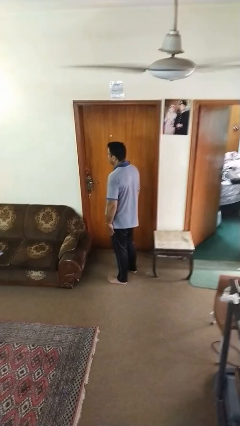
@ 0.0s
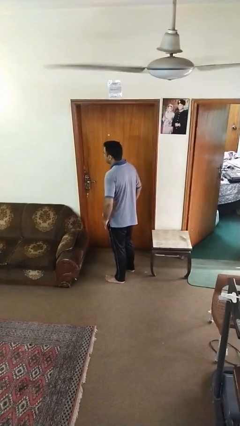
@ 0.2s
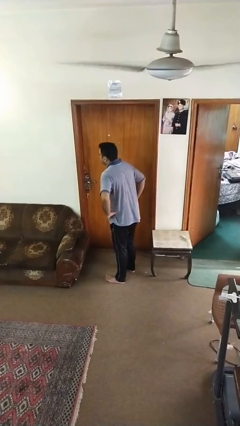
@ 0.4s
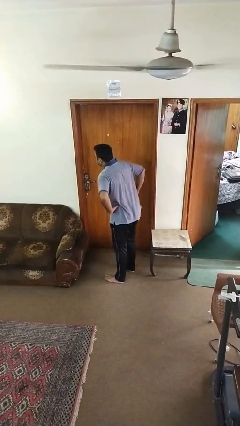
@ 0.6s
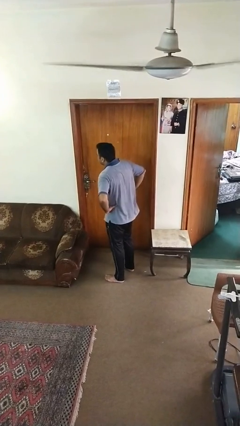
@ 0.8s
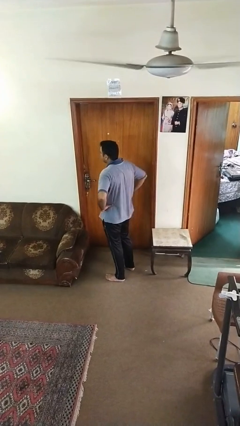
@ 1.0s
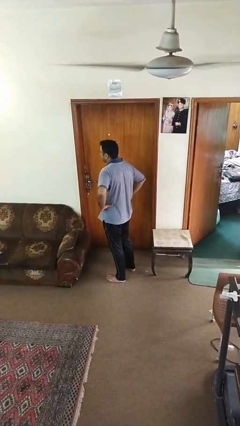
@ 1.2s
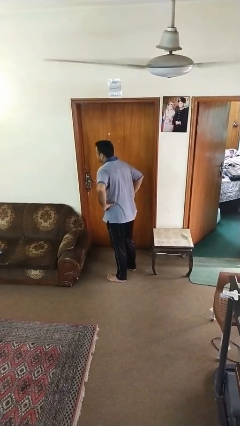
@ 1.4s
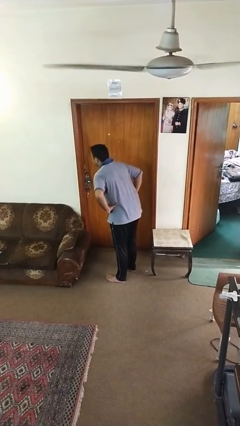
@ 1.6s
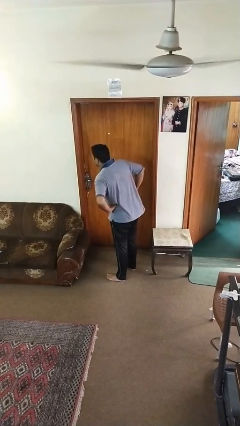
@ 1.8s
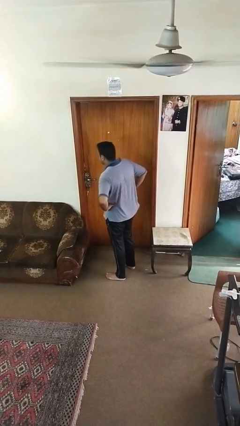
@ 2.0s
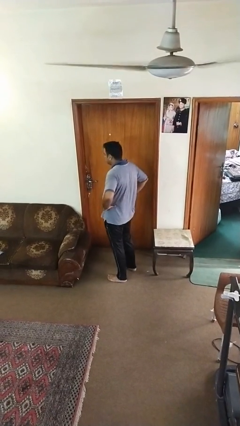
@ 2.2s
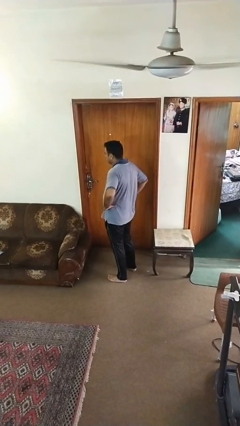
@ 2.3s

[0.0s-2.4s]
person wiggles hips

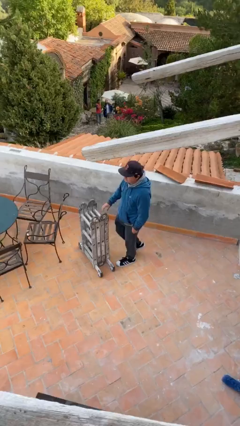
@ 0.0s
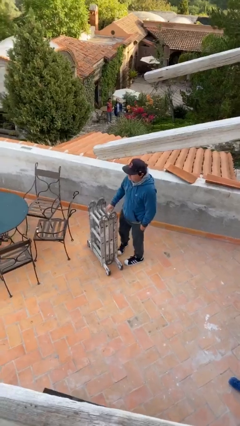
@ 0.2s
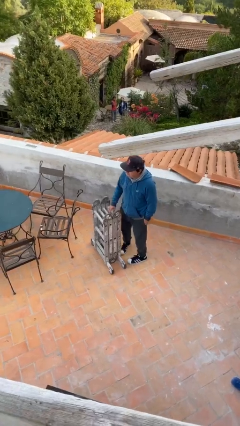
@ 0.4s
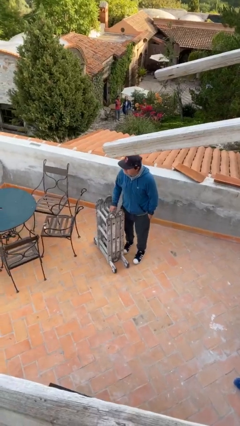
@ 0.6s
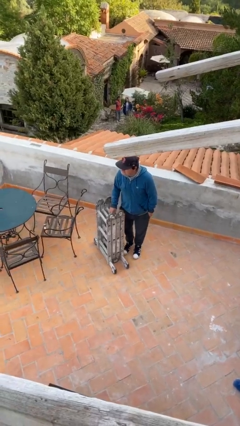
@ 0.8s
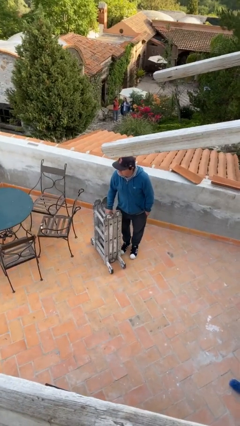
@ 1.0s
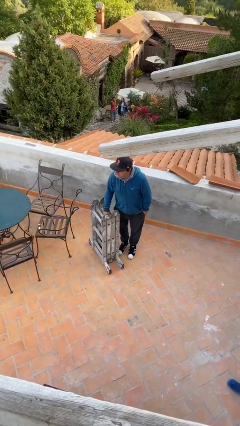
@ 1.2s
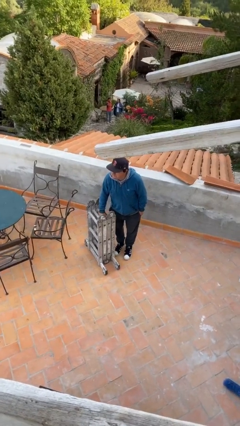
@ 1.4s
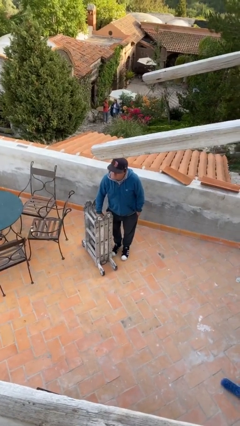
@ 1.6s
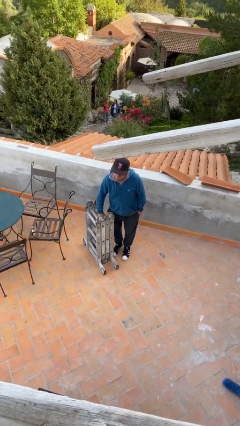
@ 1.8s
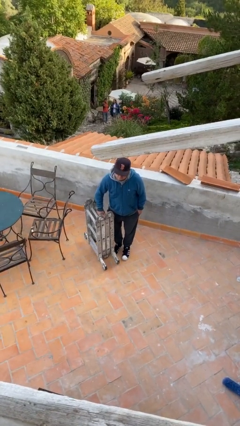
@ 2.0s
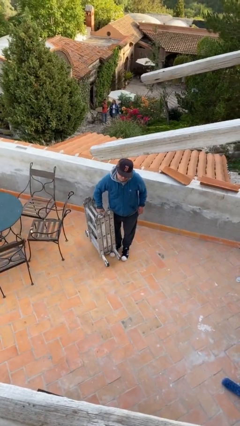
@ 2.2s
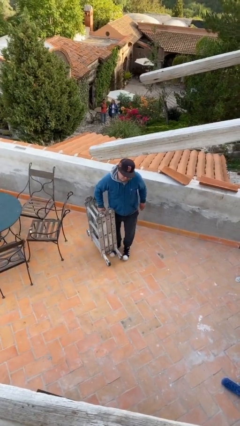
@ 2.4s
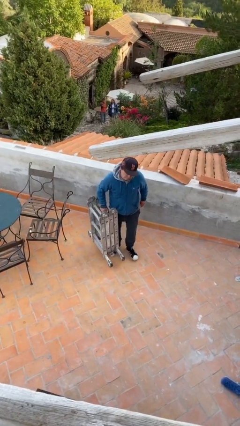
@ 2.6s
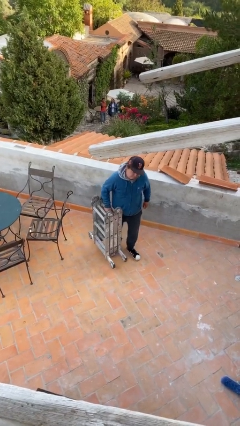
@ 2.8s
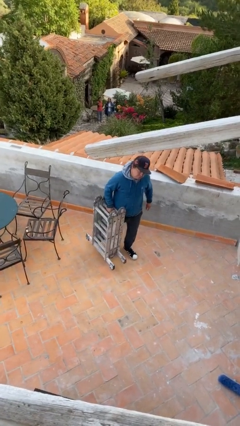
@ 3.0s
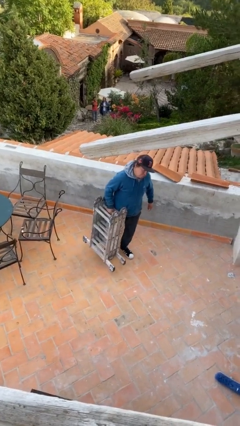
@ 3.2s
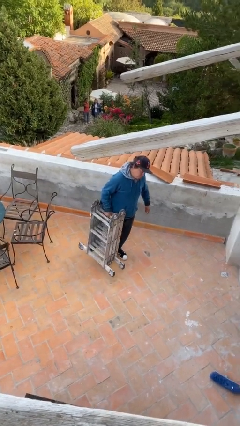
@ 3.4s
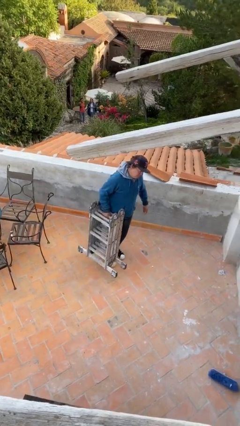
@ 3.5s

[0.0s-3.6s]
person picks up object from floor

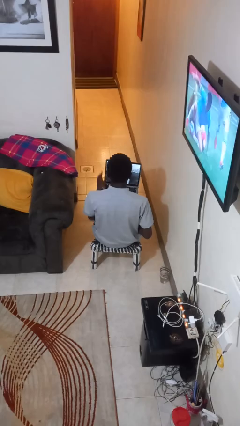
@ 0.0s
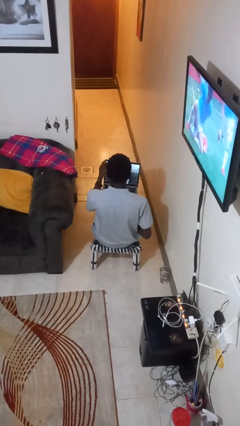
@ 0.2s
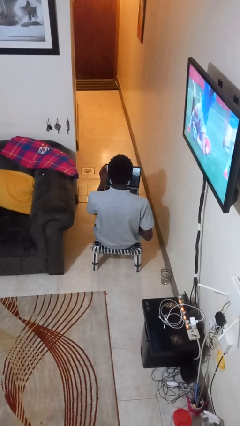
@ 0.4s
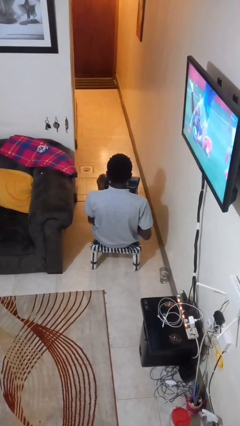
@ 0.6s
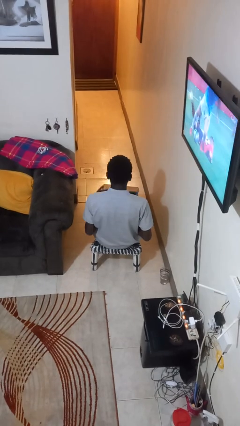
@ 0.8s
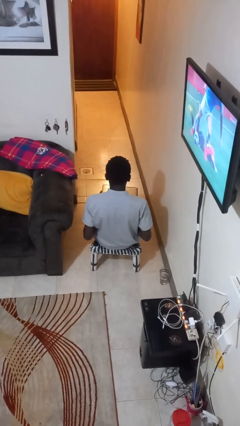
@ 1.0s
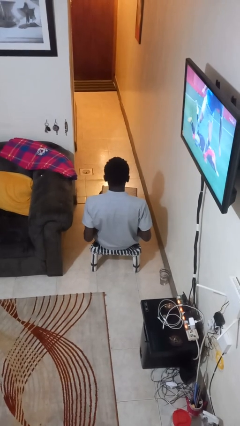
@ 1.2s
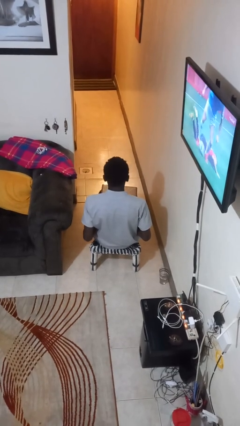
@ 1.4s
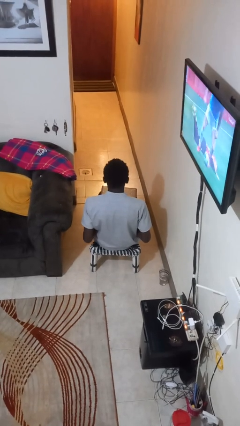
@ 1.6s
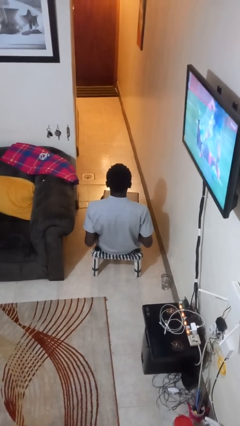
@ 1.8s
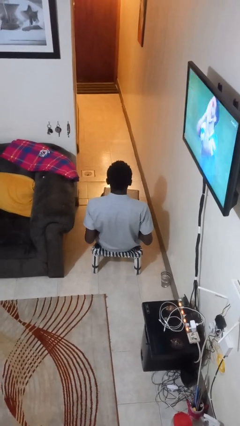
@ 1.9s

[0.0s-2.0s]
person closes laptop

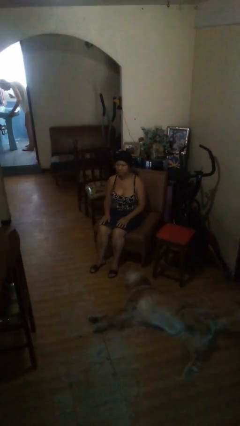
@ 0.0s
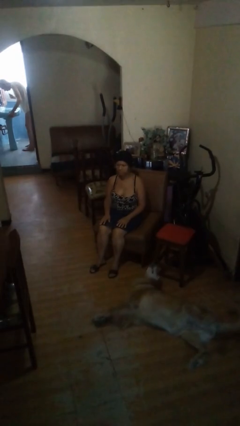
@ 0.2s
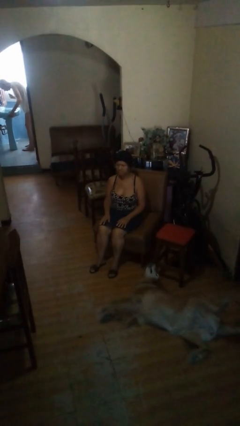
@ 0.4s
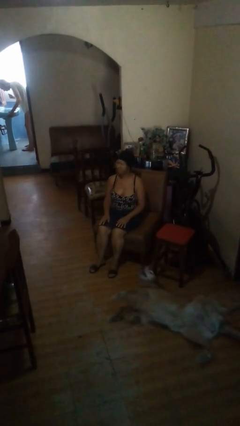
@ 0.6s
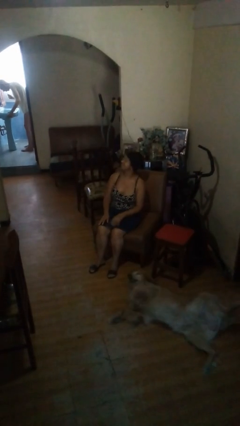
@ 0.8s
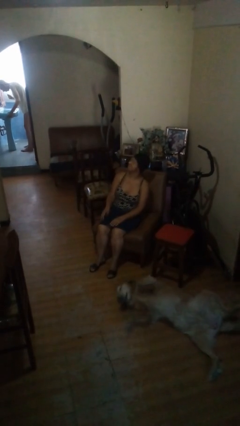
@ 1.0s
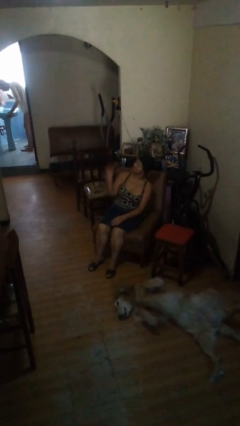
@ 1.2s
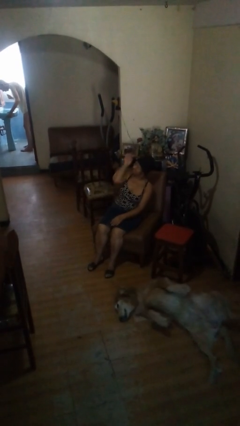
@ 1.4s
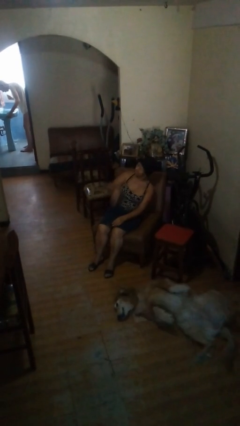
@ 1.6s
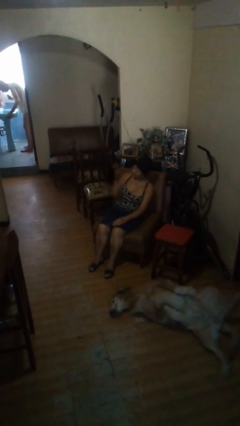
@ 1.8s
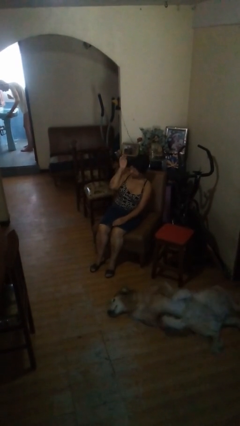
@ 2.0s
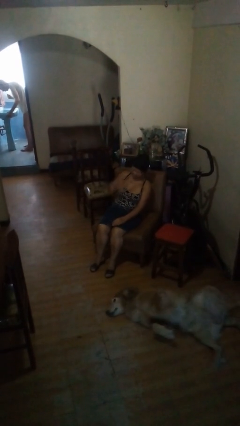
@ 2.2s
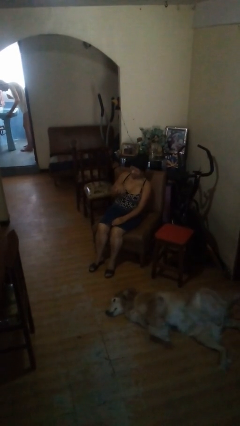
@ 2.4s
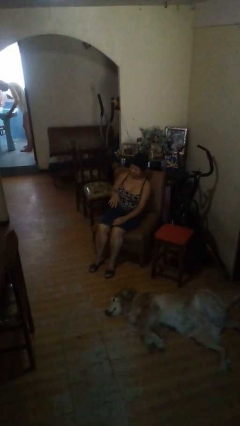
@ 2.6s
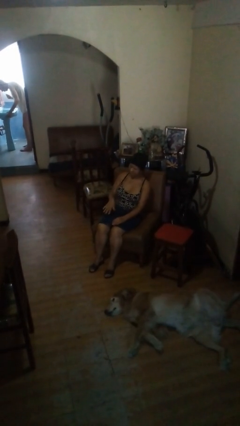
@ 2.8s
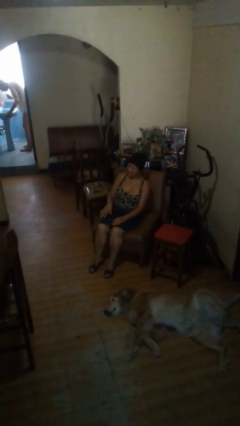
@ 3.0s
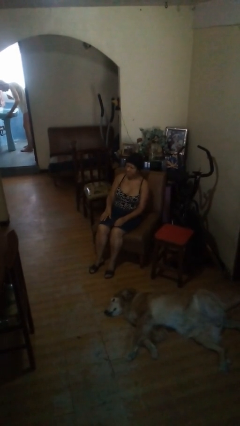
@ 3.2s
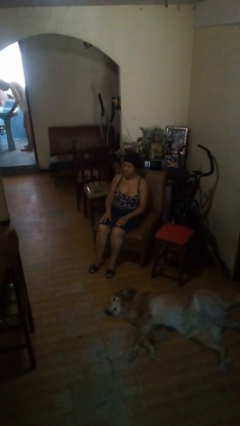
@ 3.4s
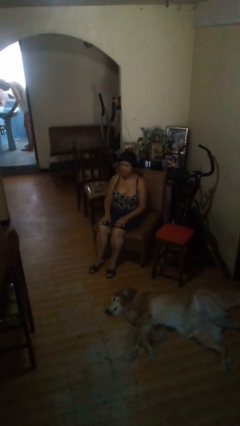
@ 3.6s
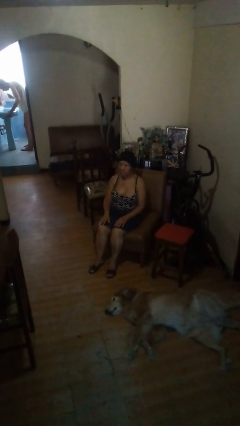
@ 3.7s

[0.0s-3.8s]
person swats bug

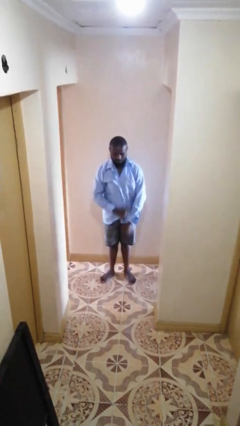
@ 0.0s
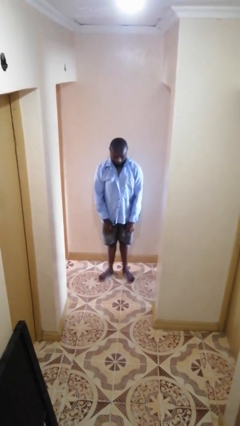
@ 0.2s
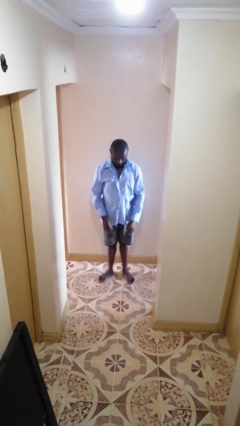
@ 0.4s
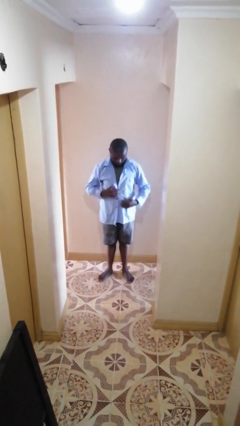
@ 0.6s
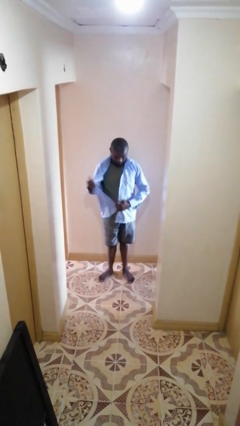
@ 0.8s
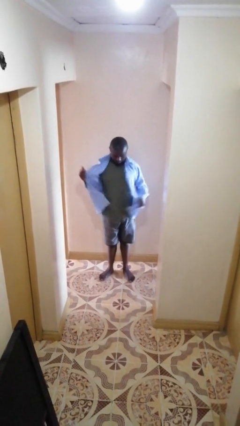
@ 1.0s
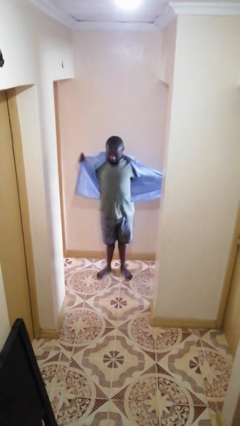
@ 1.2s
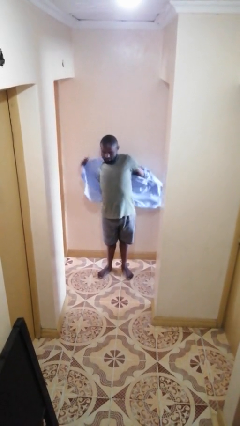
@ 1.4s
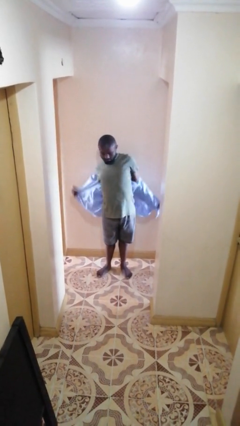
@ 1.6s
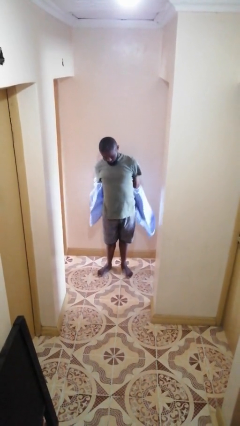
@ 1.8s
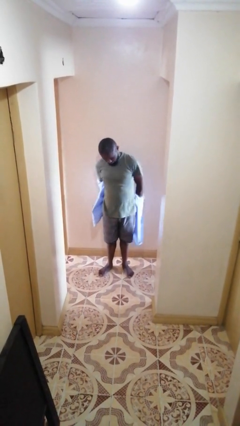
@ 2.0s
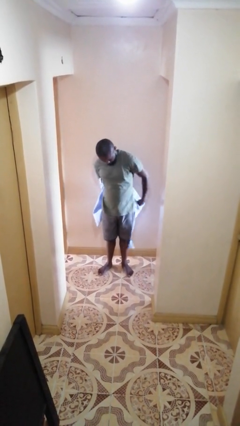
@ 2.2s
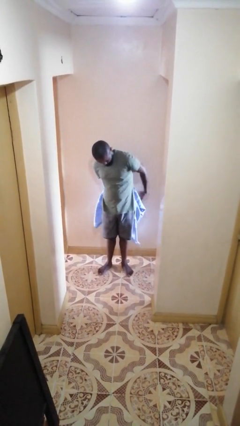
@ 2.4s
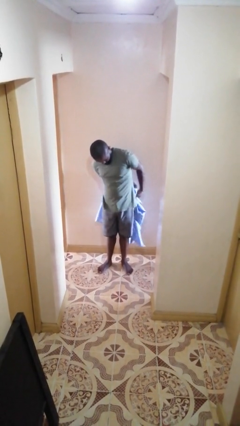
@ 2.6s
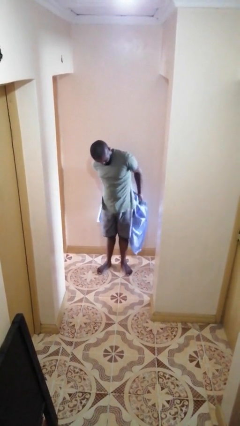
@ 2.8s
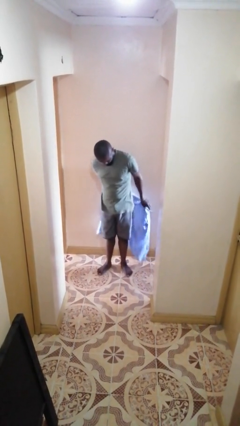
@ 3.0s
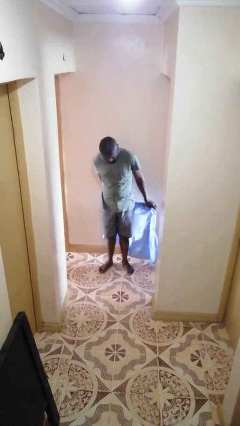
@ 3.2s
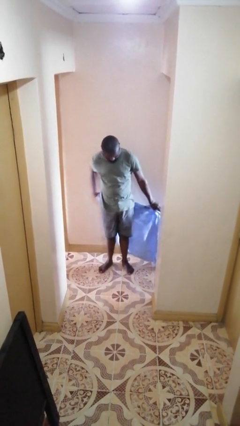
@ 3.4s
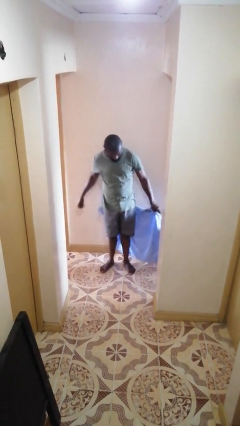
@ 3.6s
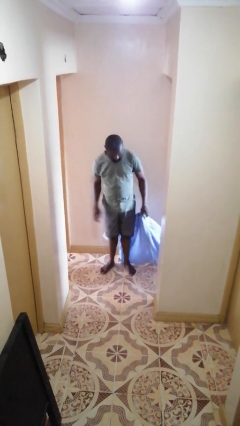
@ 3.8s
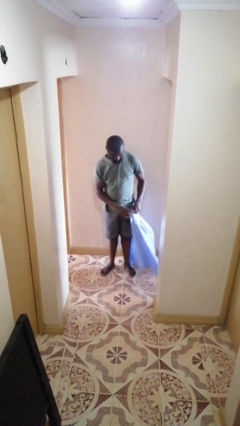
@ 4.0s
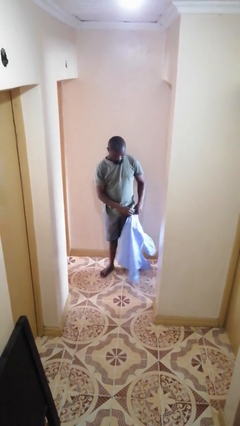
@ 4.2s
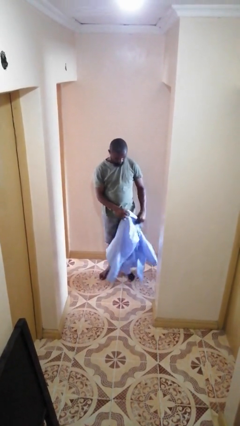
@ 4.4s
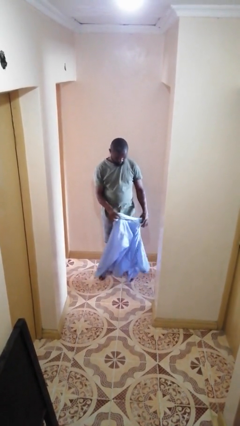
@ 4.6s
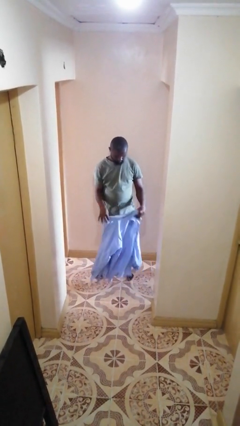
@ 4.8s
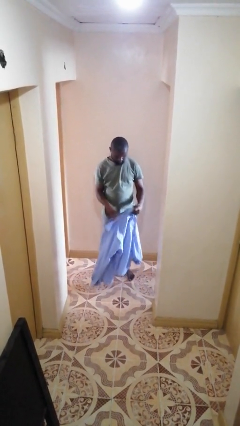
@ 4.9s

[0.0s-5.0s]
person takes off shirt

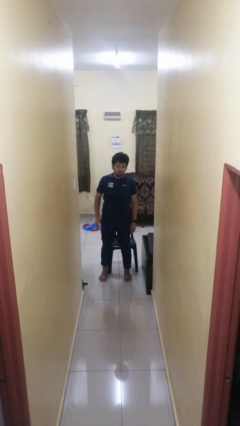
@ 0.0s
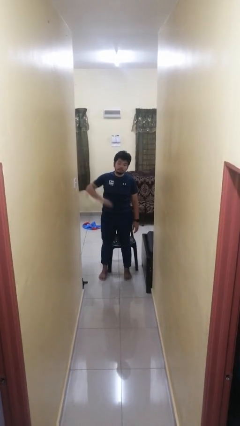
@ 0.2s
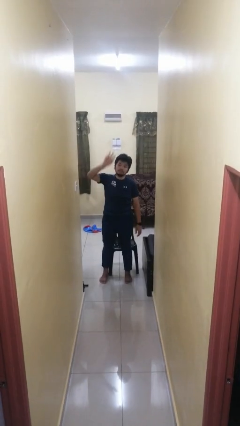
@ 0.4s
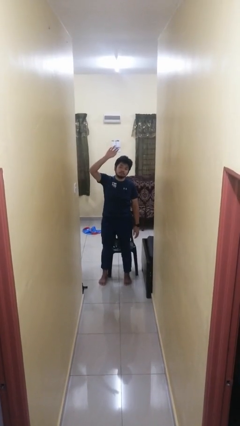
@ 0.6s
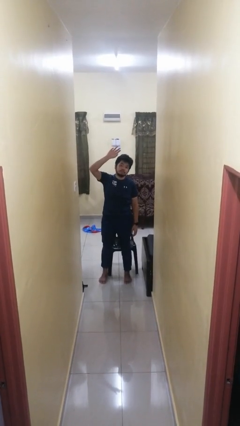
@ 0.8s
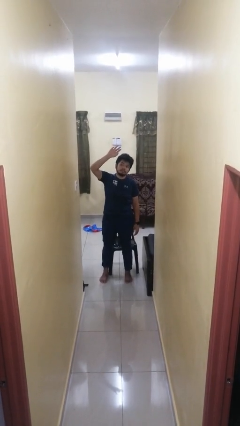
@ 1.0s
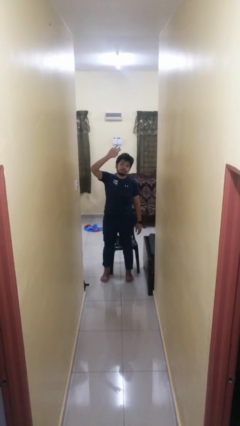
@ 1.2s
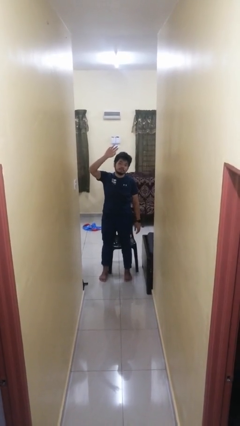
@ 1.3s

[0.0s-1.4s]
person gestures swipe up
